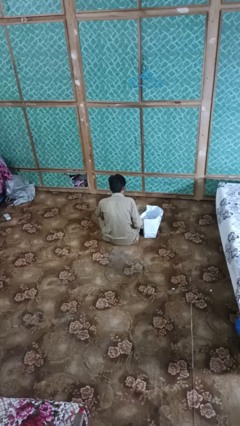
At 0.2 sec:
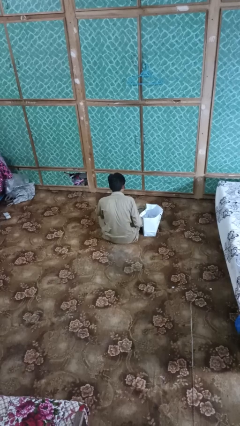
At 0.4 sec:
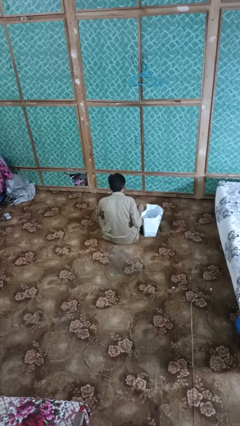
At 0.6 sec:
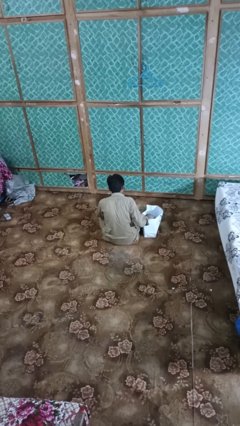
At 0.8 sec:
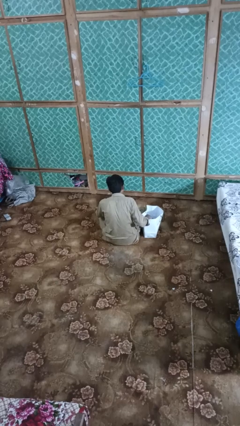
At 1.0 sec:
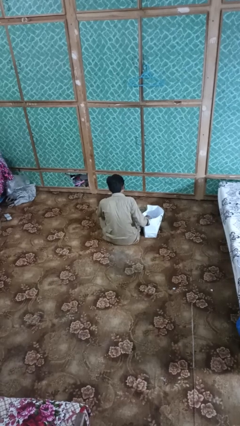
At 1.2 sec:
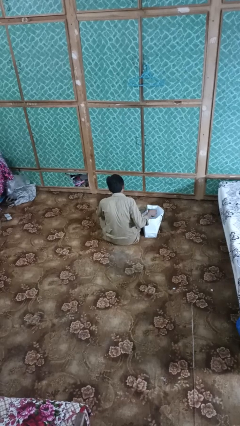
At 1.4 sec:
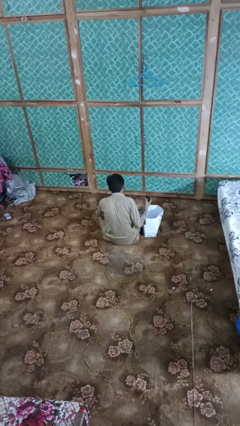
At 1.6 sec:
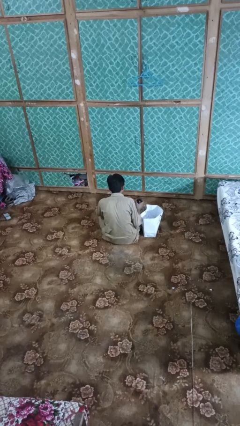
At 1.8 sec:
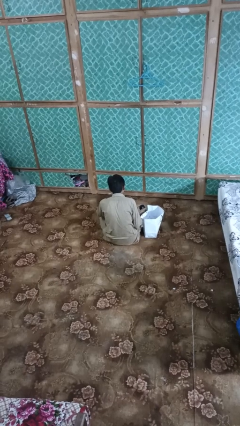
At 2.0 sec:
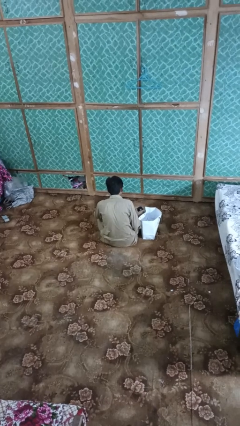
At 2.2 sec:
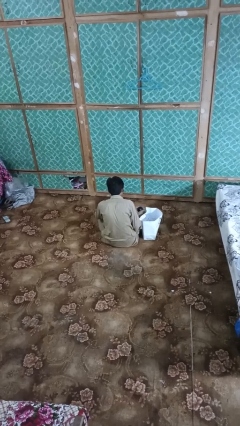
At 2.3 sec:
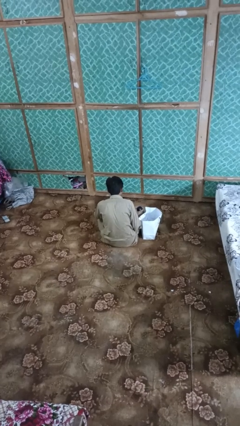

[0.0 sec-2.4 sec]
person takes object from bag

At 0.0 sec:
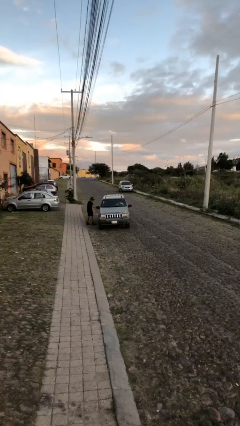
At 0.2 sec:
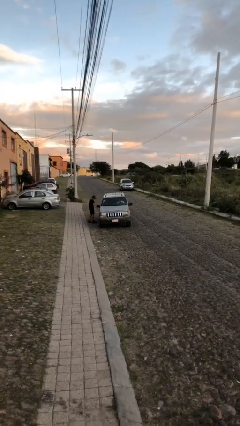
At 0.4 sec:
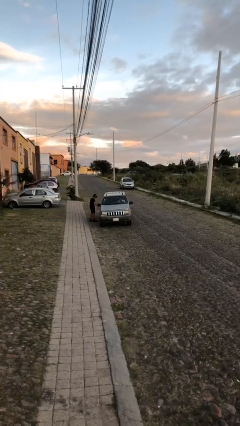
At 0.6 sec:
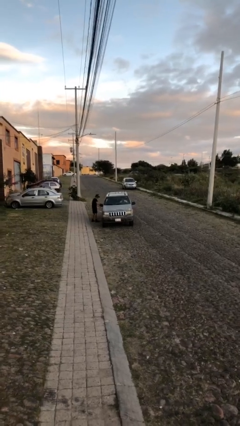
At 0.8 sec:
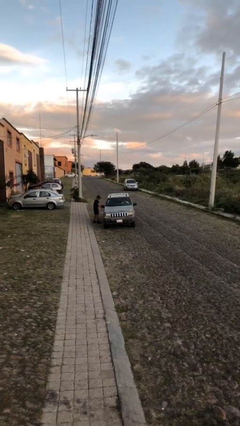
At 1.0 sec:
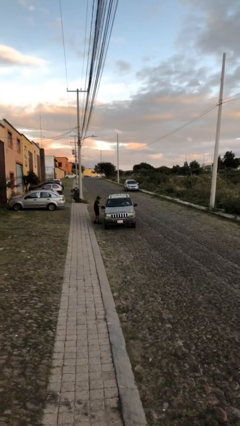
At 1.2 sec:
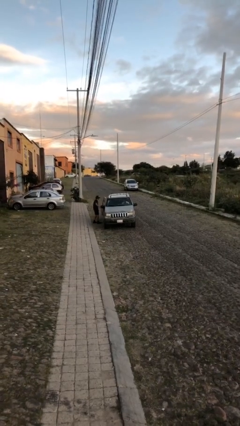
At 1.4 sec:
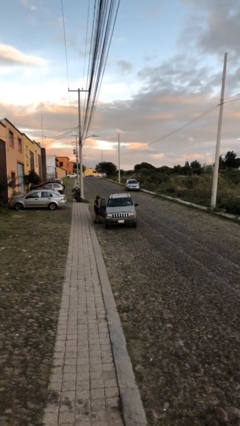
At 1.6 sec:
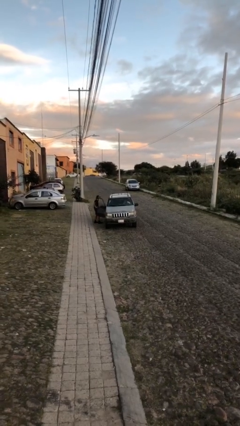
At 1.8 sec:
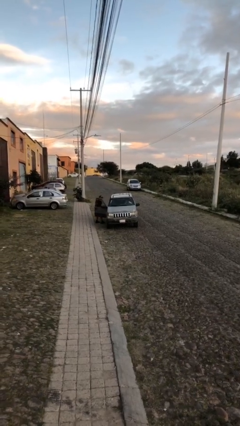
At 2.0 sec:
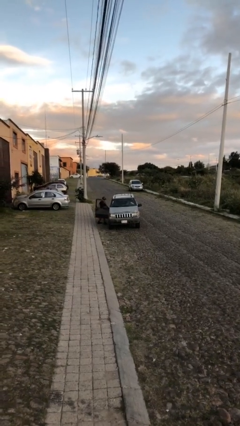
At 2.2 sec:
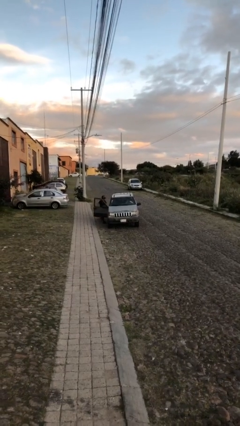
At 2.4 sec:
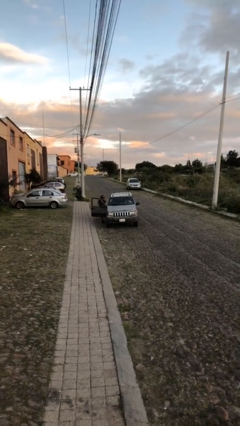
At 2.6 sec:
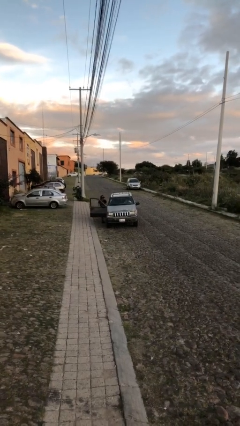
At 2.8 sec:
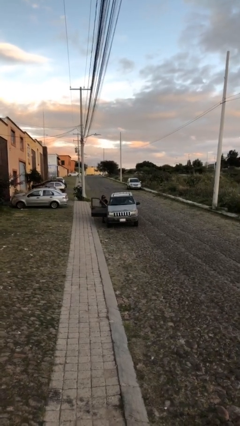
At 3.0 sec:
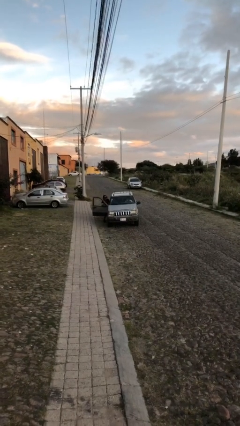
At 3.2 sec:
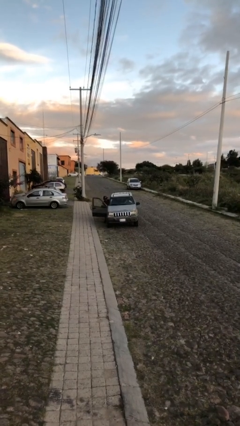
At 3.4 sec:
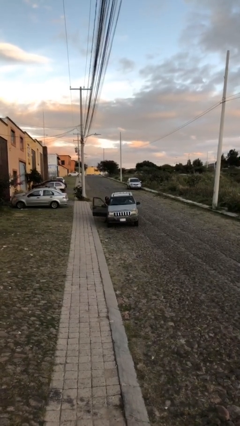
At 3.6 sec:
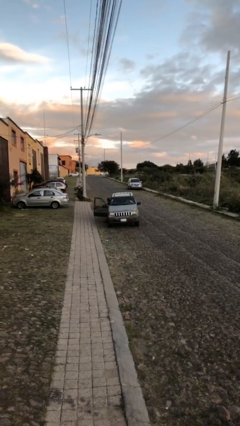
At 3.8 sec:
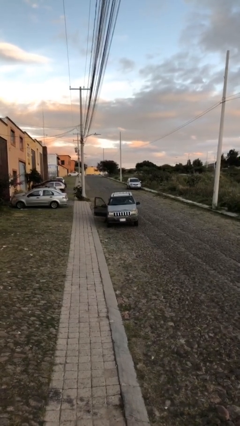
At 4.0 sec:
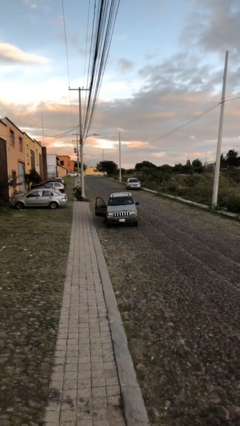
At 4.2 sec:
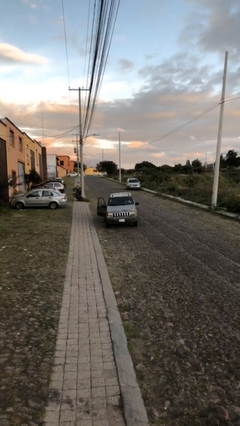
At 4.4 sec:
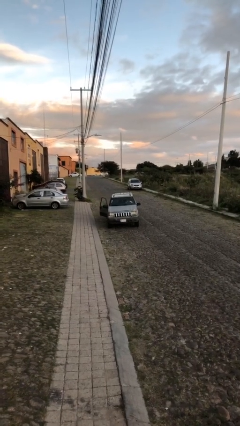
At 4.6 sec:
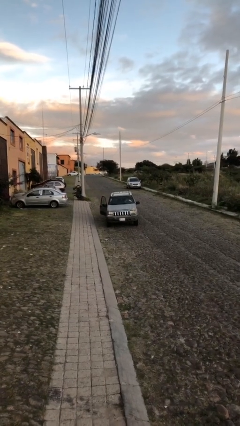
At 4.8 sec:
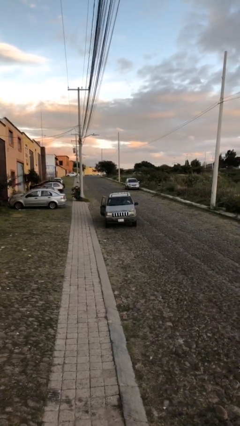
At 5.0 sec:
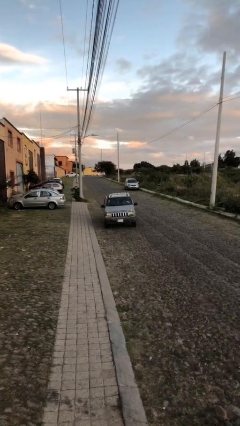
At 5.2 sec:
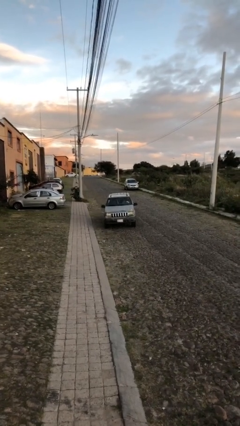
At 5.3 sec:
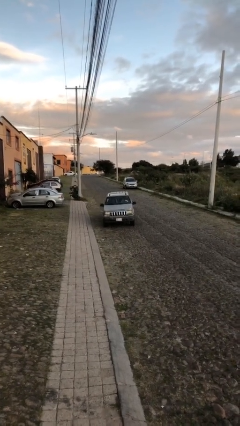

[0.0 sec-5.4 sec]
car picks up person

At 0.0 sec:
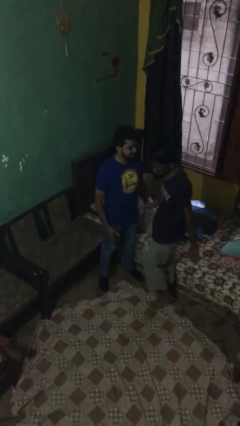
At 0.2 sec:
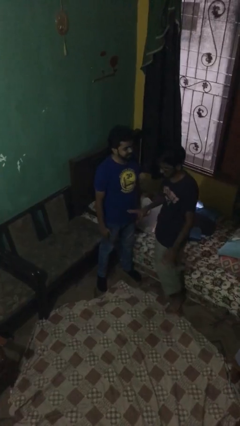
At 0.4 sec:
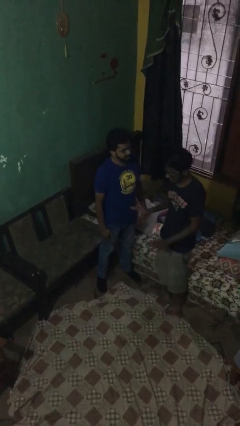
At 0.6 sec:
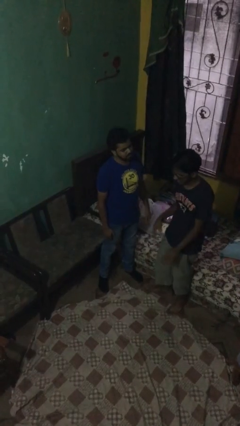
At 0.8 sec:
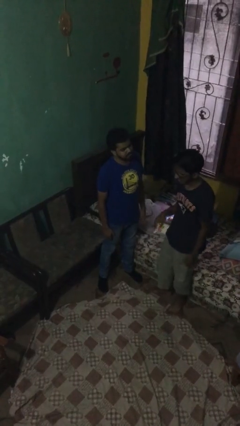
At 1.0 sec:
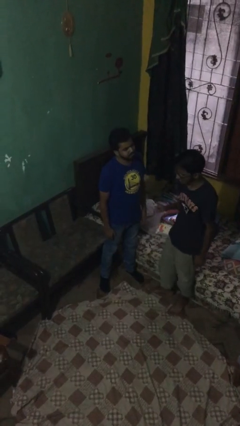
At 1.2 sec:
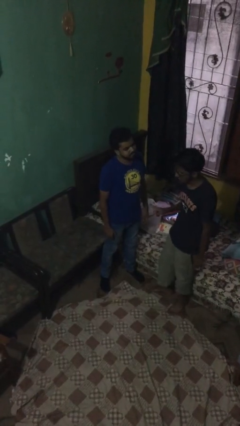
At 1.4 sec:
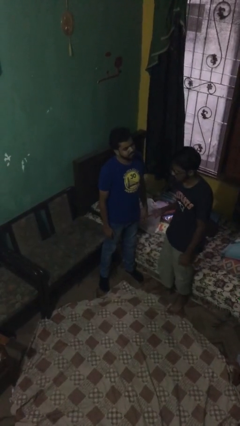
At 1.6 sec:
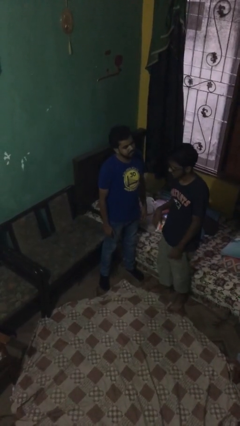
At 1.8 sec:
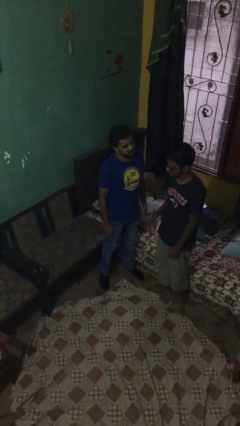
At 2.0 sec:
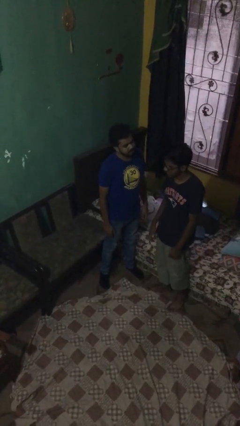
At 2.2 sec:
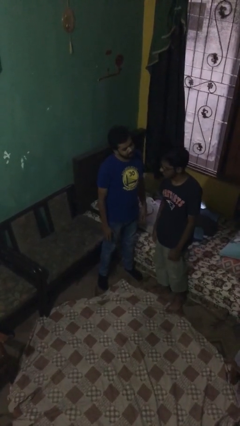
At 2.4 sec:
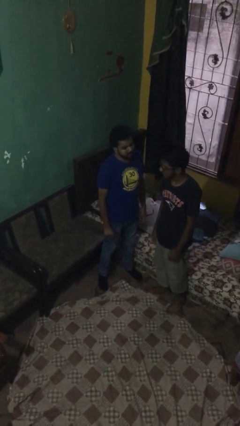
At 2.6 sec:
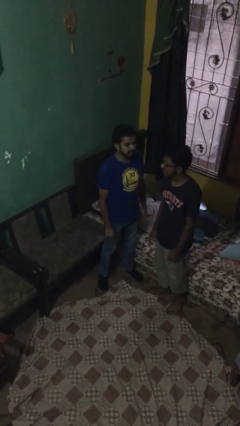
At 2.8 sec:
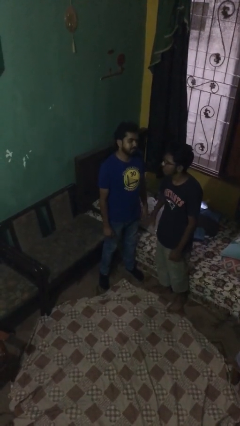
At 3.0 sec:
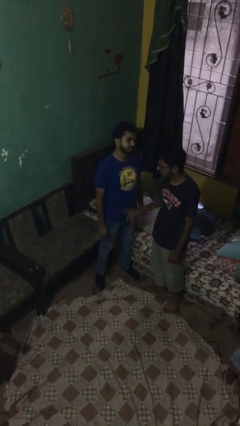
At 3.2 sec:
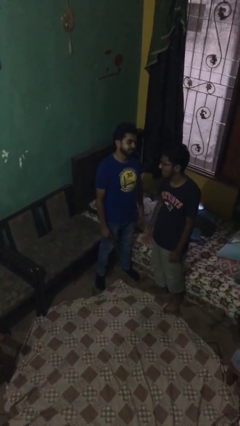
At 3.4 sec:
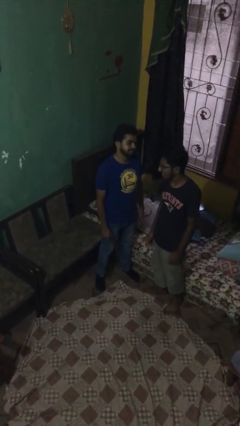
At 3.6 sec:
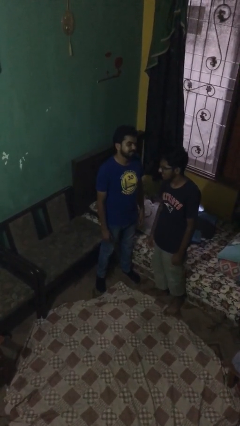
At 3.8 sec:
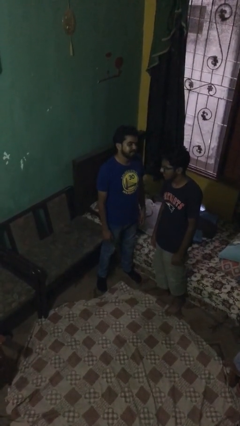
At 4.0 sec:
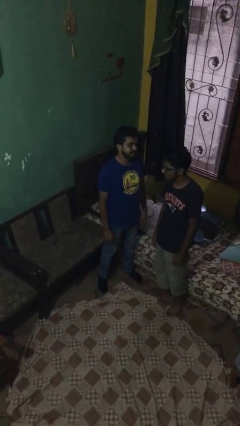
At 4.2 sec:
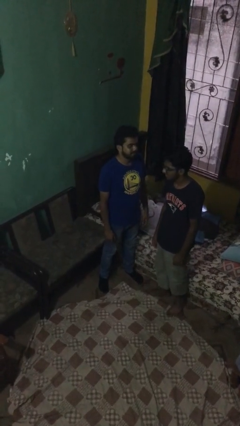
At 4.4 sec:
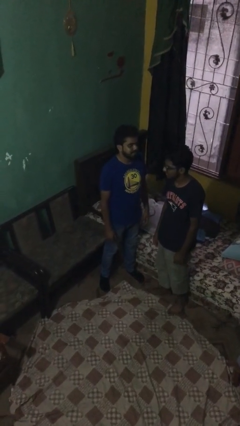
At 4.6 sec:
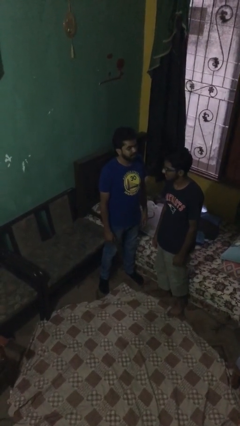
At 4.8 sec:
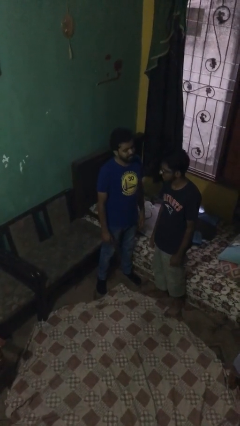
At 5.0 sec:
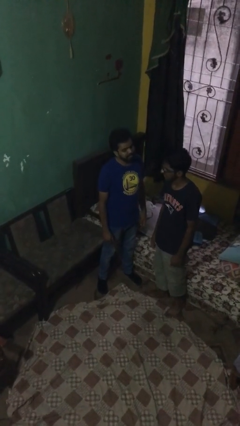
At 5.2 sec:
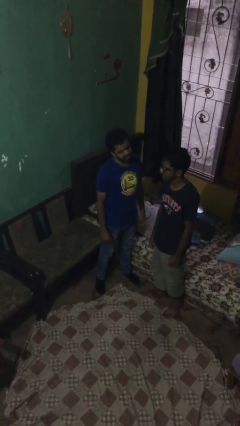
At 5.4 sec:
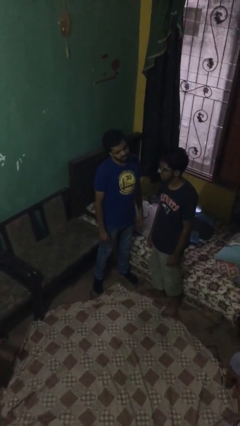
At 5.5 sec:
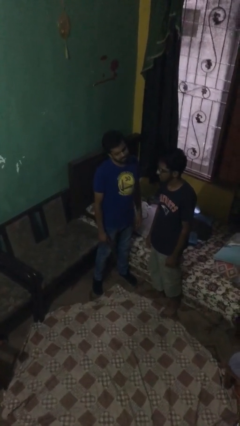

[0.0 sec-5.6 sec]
person talks to person

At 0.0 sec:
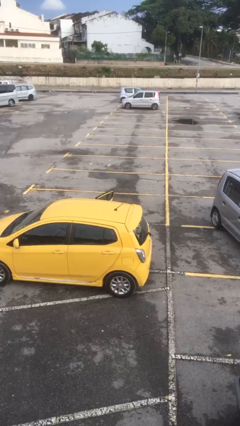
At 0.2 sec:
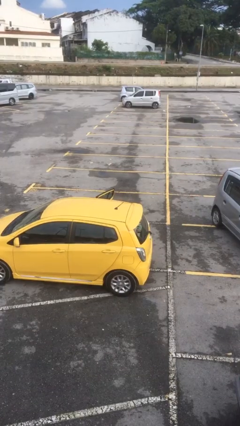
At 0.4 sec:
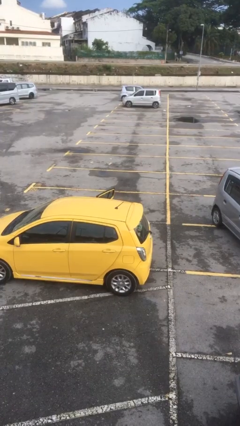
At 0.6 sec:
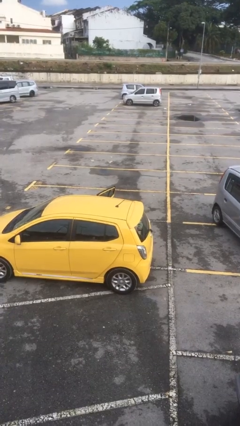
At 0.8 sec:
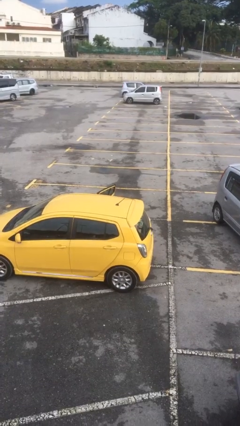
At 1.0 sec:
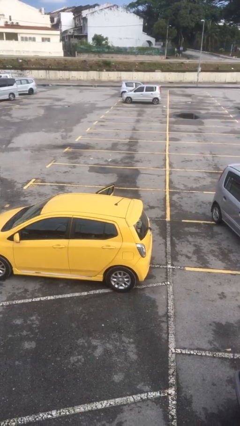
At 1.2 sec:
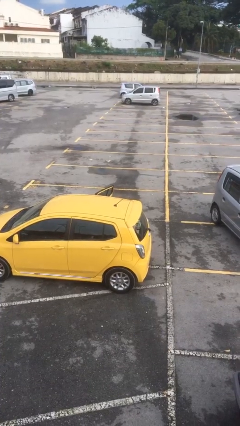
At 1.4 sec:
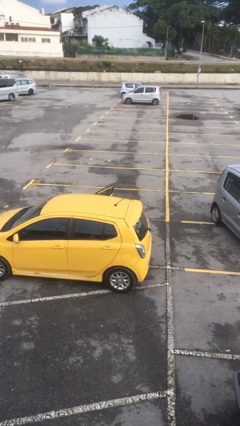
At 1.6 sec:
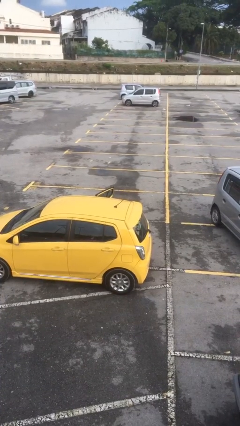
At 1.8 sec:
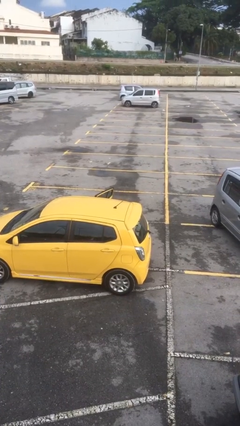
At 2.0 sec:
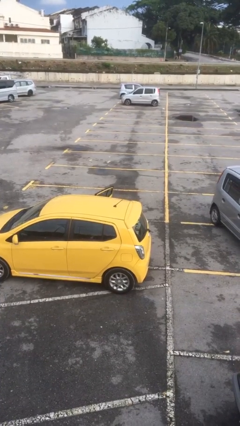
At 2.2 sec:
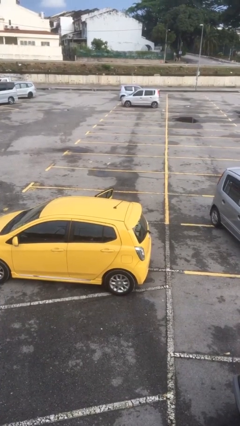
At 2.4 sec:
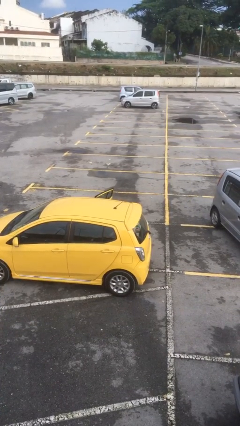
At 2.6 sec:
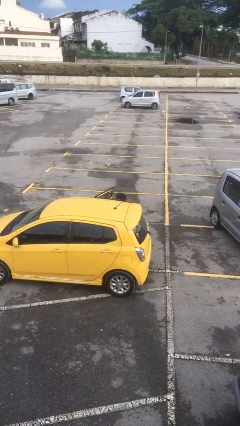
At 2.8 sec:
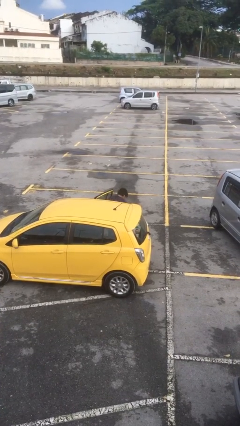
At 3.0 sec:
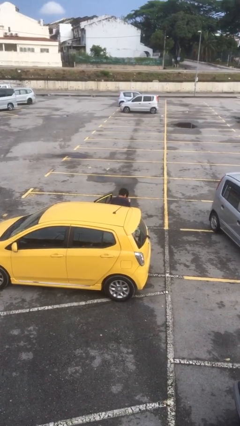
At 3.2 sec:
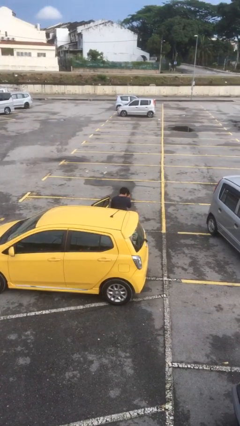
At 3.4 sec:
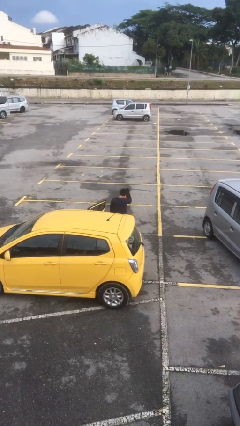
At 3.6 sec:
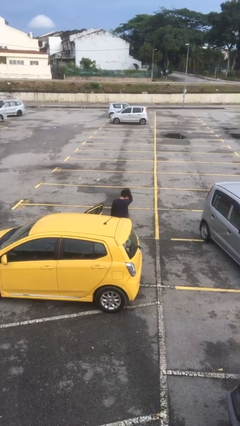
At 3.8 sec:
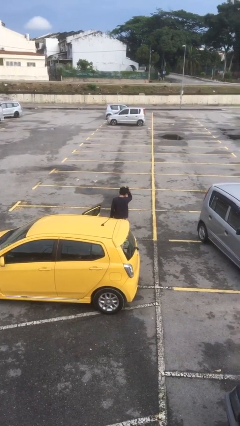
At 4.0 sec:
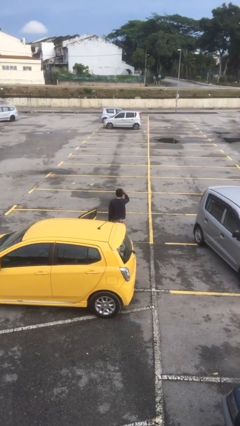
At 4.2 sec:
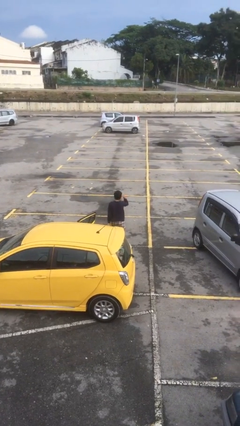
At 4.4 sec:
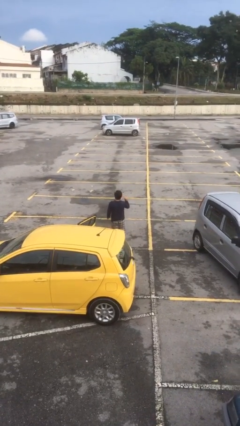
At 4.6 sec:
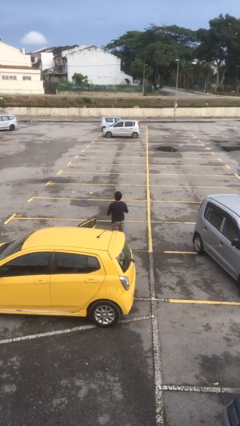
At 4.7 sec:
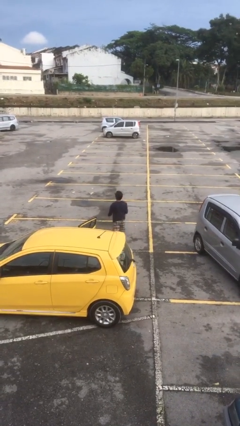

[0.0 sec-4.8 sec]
person exits car
